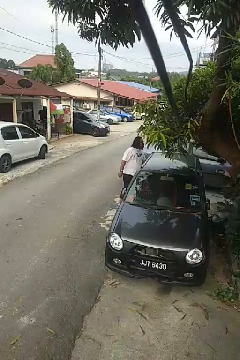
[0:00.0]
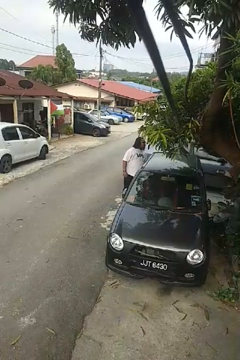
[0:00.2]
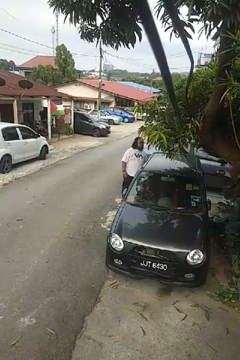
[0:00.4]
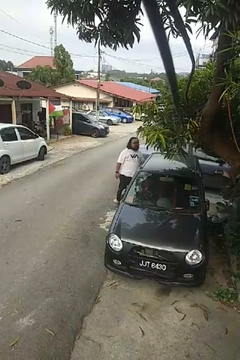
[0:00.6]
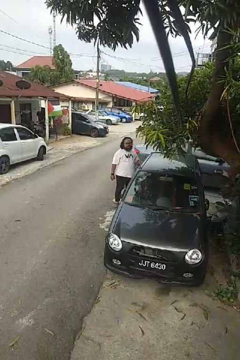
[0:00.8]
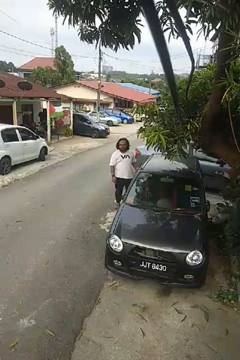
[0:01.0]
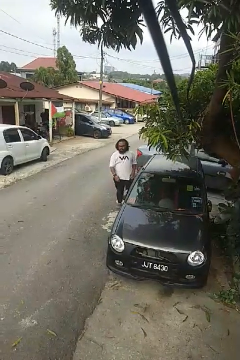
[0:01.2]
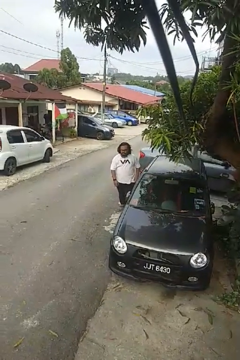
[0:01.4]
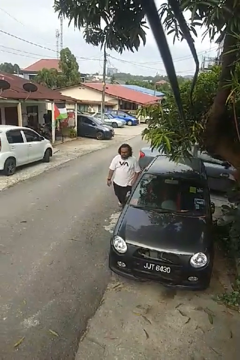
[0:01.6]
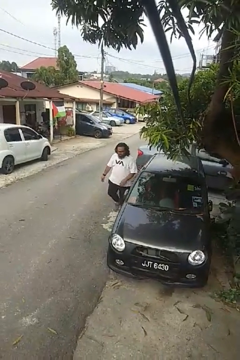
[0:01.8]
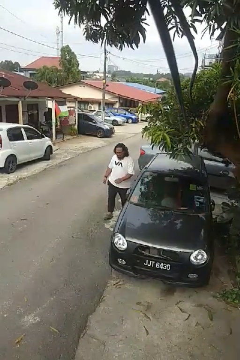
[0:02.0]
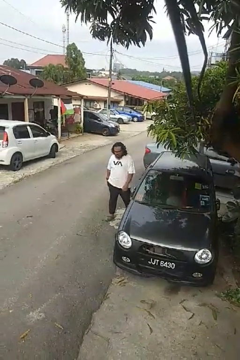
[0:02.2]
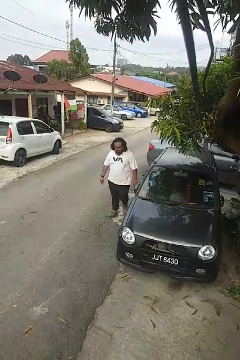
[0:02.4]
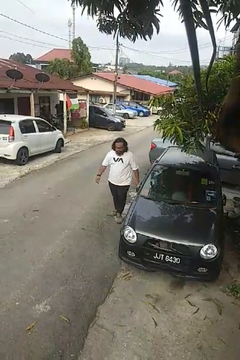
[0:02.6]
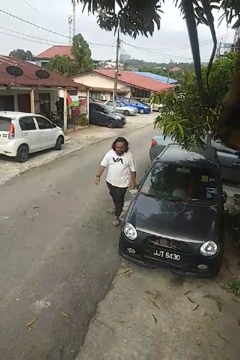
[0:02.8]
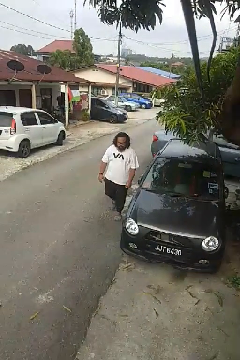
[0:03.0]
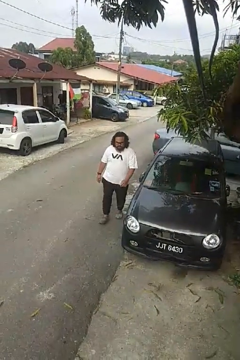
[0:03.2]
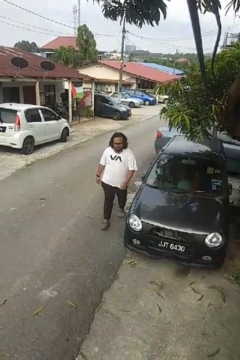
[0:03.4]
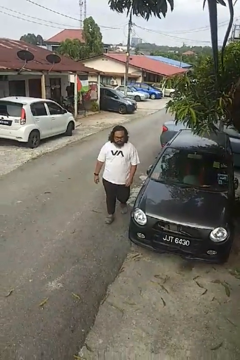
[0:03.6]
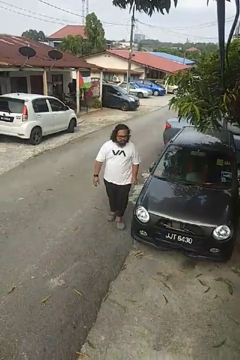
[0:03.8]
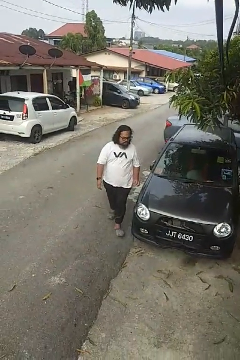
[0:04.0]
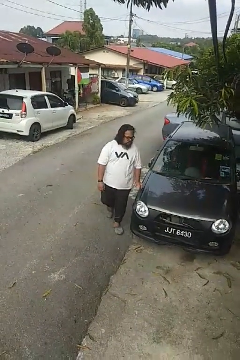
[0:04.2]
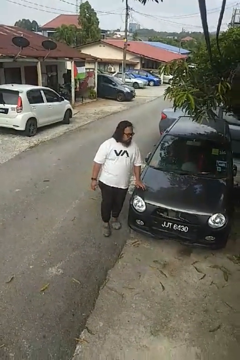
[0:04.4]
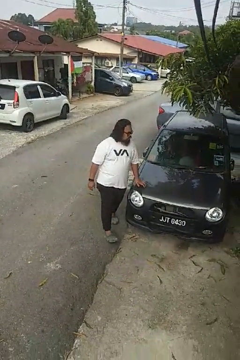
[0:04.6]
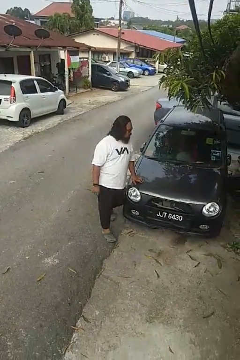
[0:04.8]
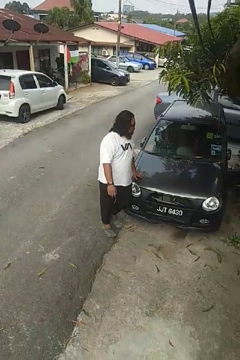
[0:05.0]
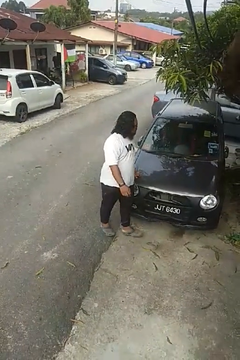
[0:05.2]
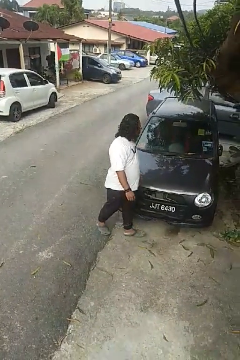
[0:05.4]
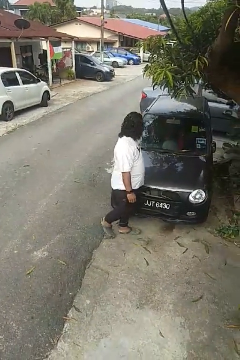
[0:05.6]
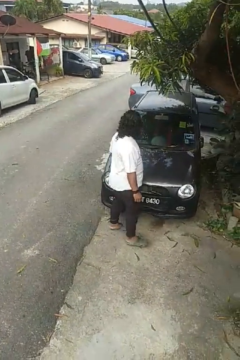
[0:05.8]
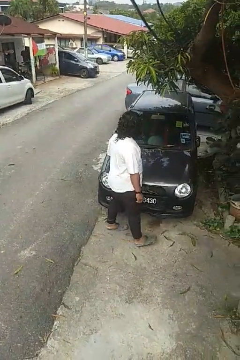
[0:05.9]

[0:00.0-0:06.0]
person walks around car

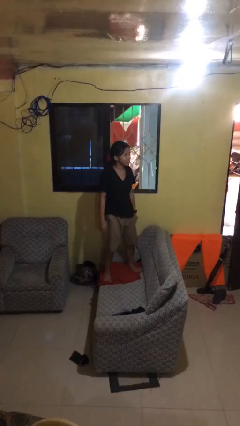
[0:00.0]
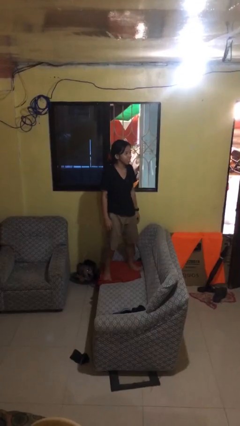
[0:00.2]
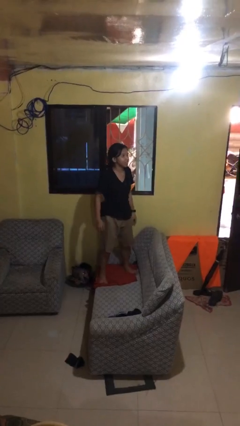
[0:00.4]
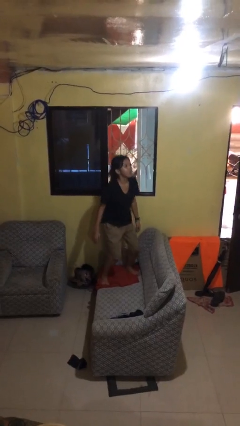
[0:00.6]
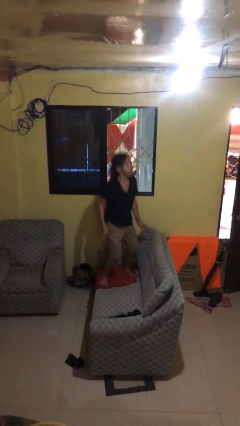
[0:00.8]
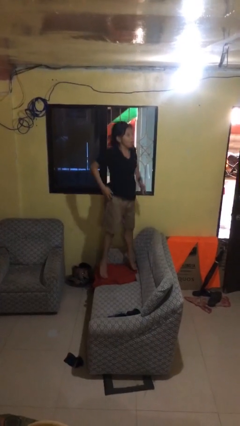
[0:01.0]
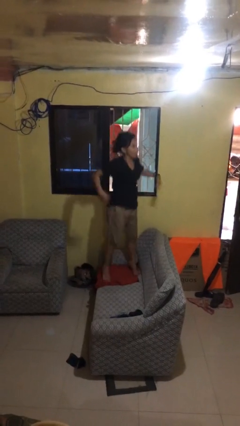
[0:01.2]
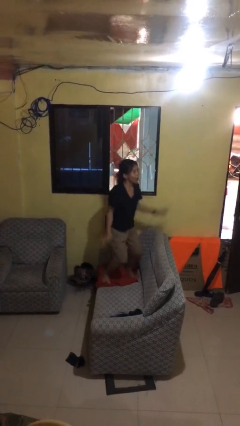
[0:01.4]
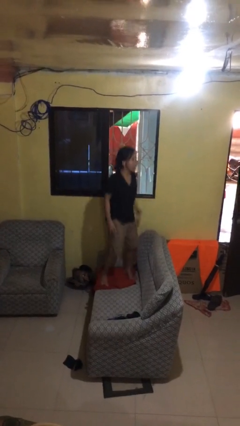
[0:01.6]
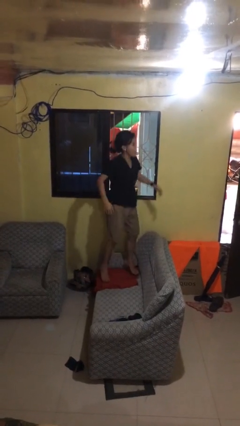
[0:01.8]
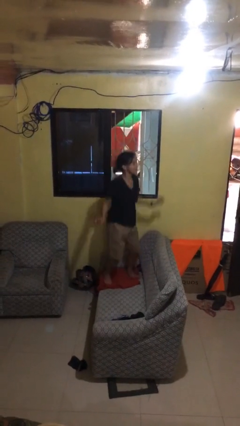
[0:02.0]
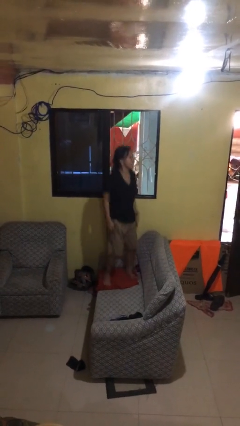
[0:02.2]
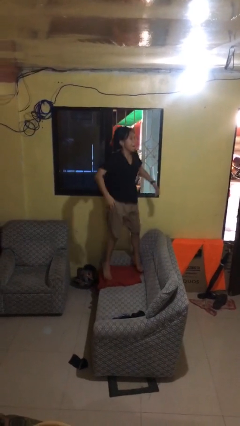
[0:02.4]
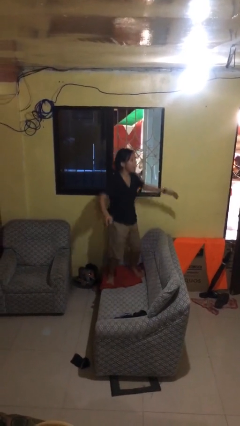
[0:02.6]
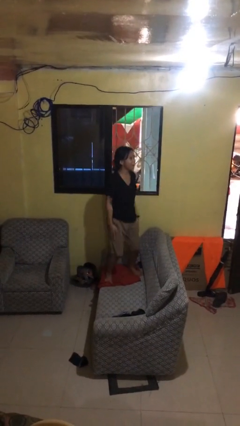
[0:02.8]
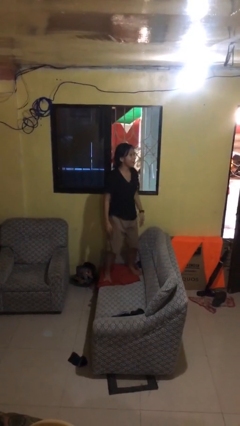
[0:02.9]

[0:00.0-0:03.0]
person jumps on couch

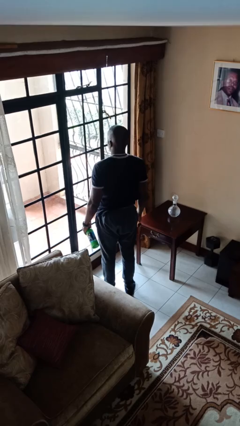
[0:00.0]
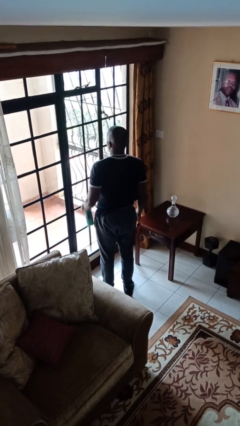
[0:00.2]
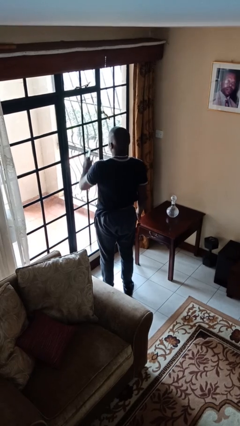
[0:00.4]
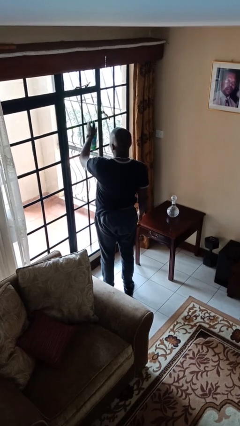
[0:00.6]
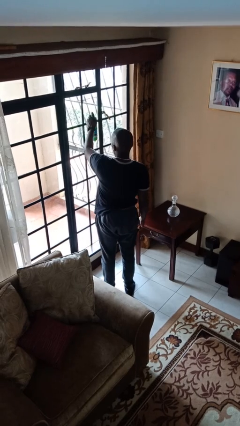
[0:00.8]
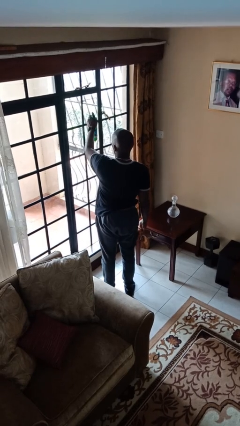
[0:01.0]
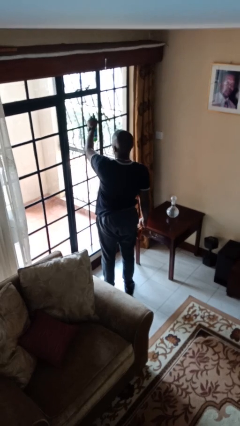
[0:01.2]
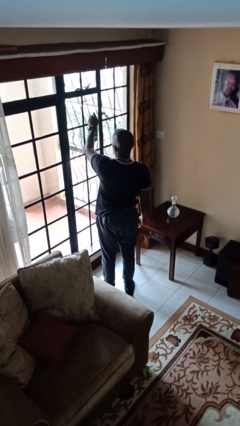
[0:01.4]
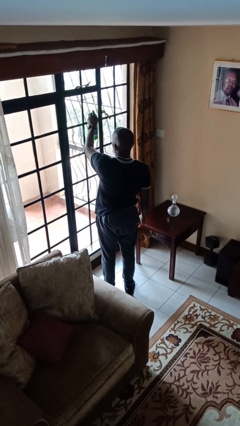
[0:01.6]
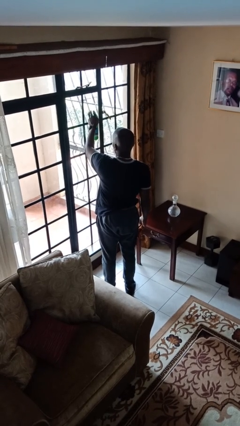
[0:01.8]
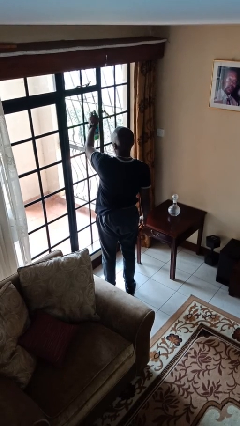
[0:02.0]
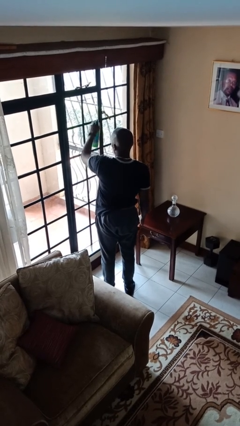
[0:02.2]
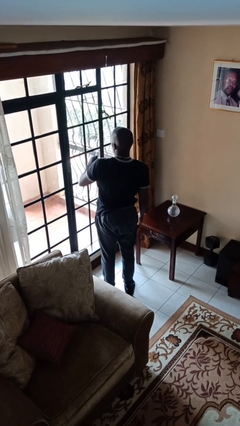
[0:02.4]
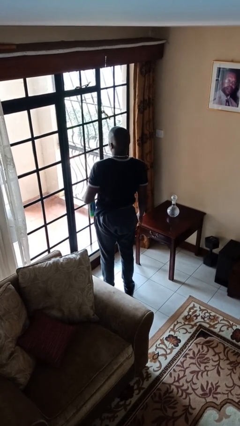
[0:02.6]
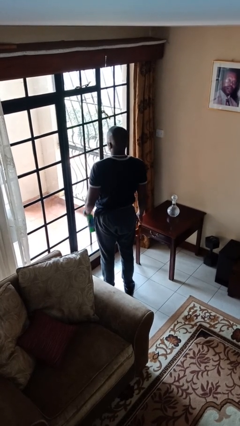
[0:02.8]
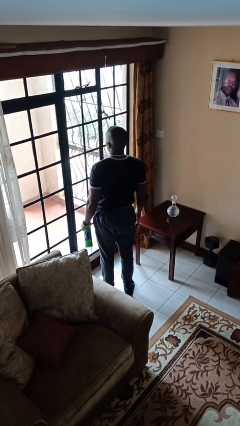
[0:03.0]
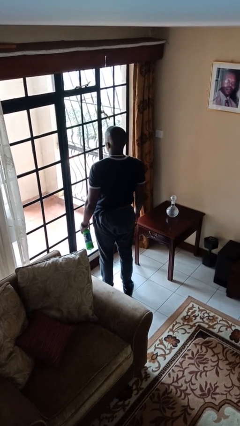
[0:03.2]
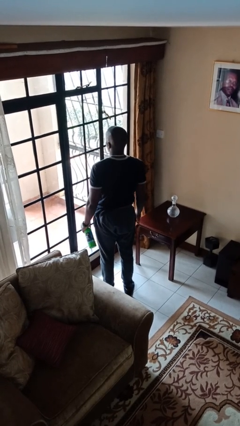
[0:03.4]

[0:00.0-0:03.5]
person sprays from bottle

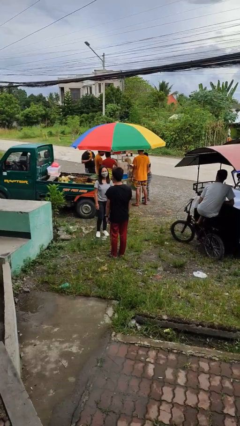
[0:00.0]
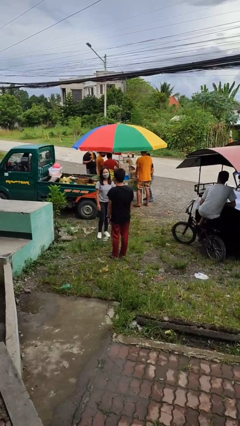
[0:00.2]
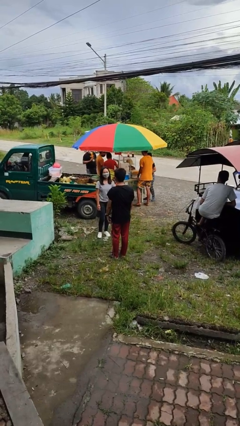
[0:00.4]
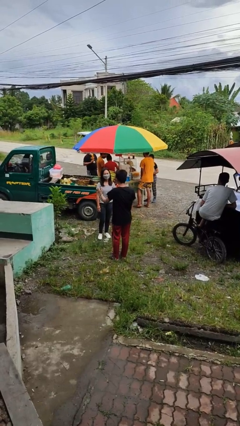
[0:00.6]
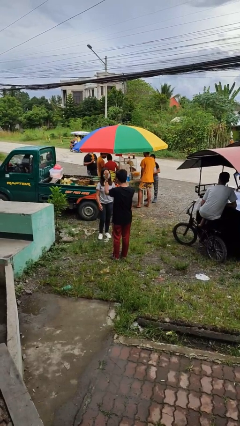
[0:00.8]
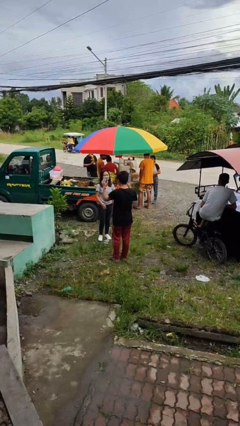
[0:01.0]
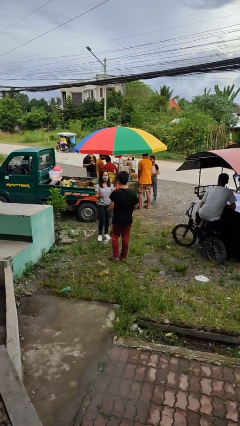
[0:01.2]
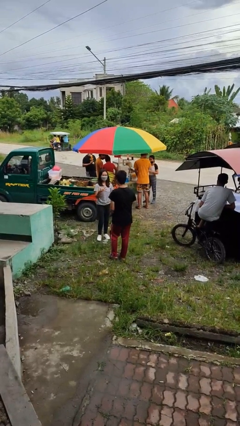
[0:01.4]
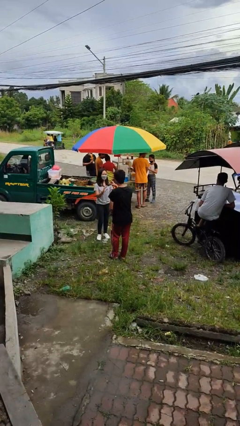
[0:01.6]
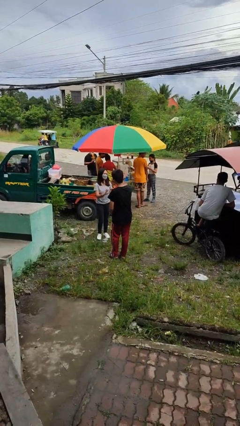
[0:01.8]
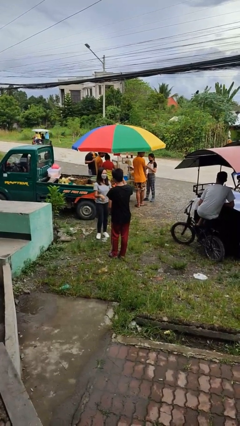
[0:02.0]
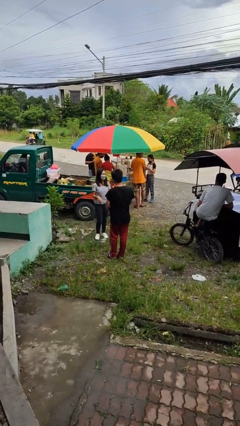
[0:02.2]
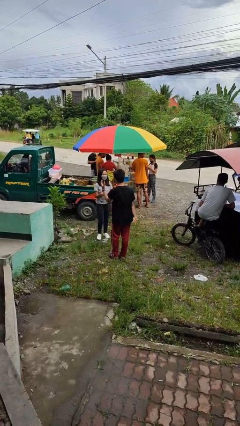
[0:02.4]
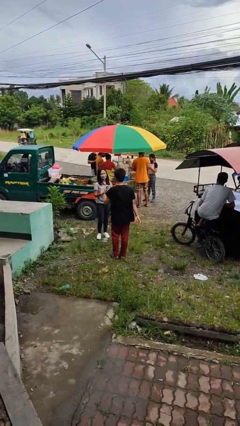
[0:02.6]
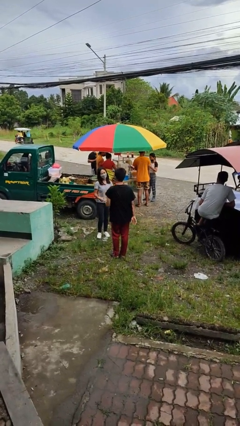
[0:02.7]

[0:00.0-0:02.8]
person talks to person

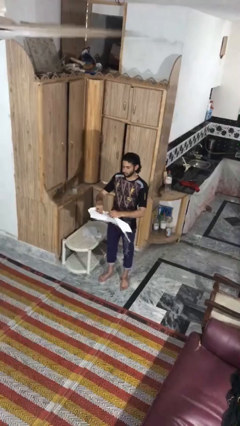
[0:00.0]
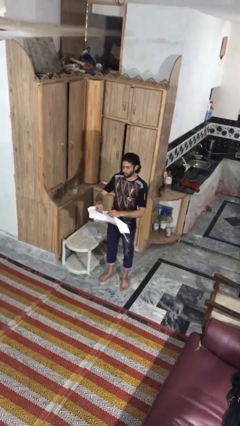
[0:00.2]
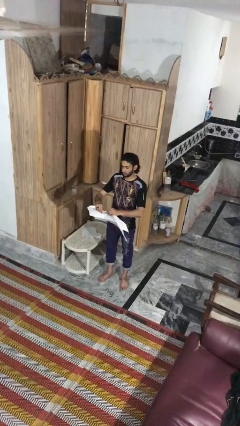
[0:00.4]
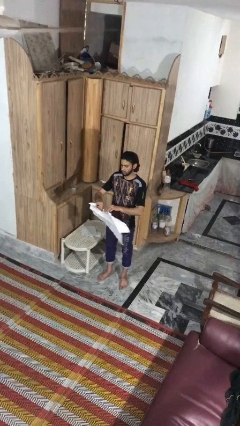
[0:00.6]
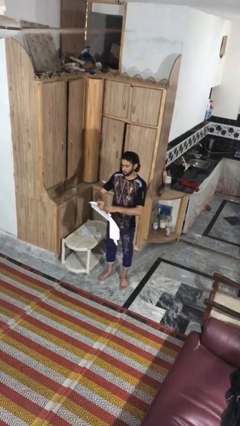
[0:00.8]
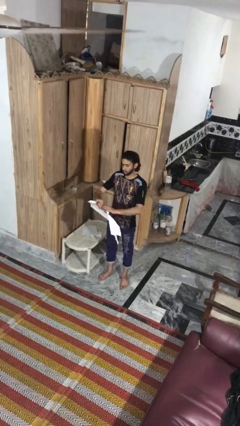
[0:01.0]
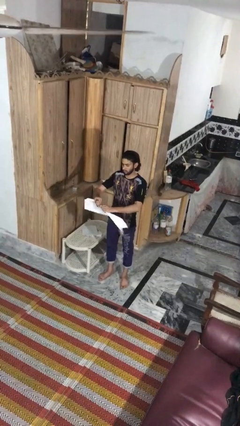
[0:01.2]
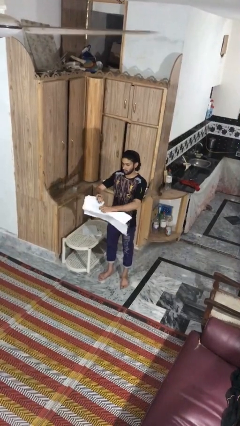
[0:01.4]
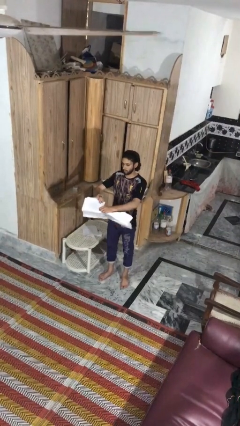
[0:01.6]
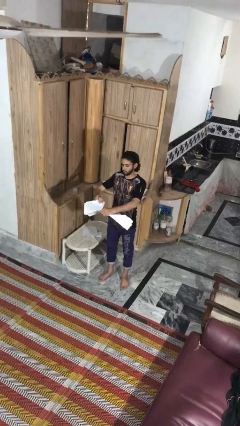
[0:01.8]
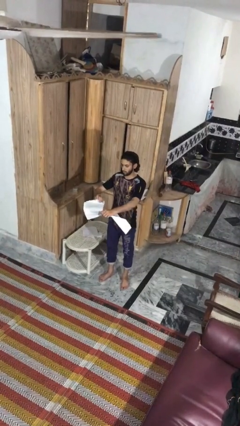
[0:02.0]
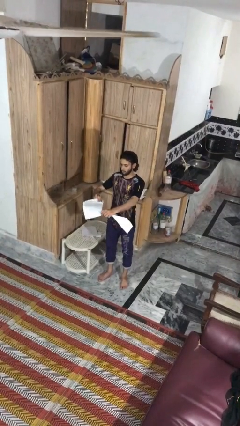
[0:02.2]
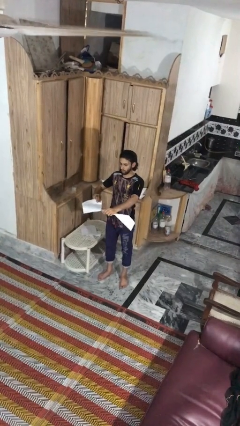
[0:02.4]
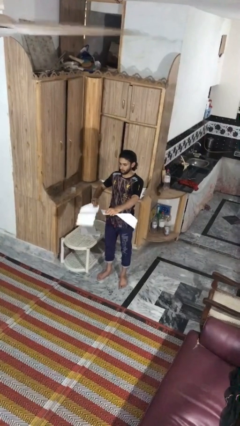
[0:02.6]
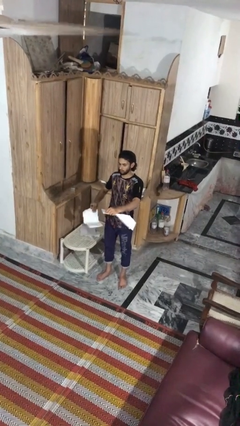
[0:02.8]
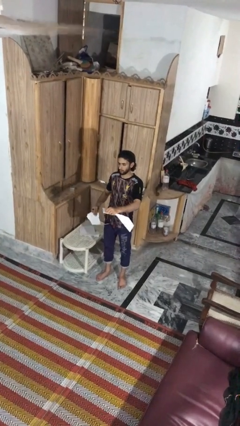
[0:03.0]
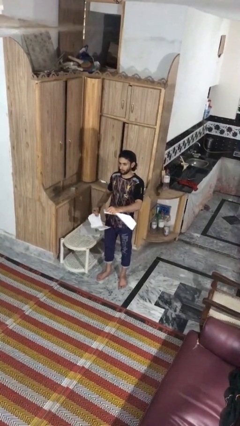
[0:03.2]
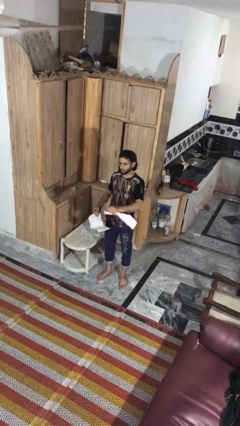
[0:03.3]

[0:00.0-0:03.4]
person tears paper
